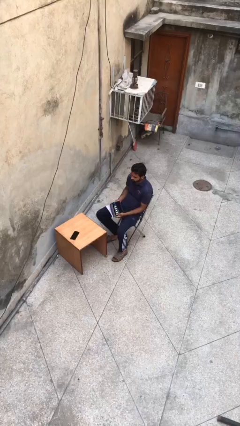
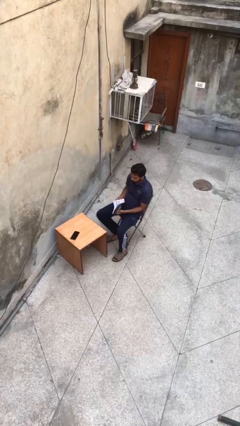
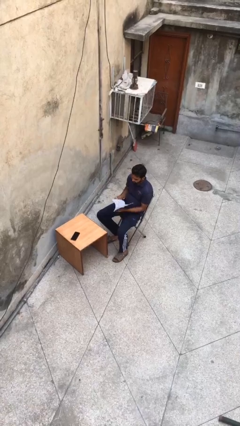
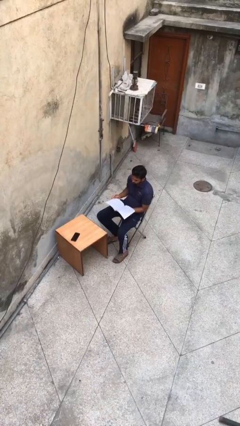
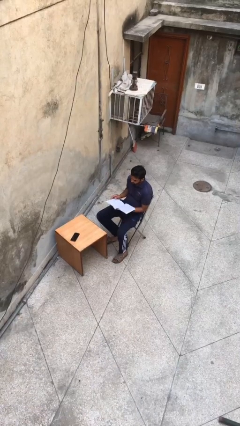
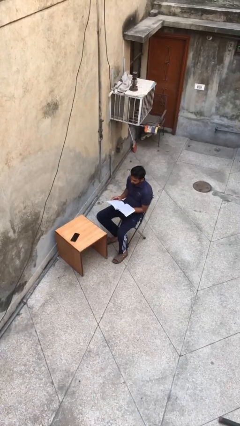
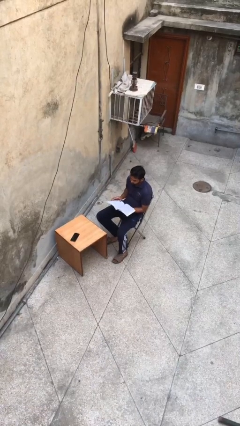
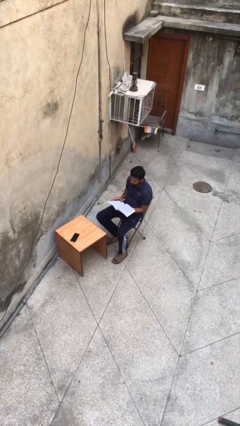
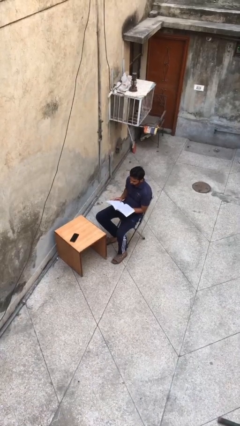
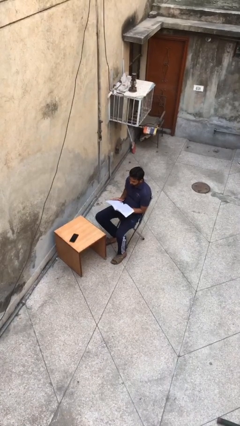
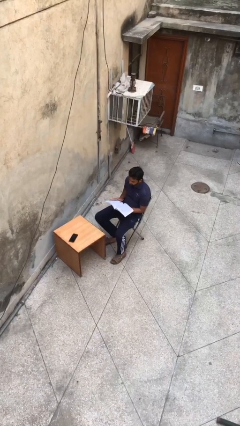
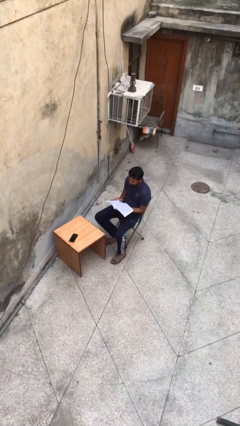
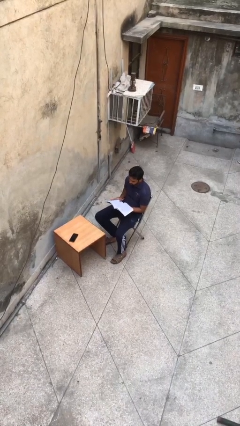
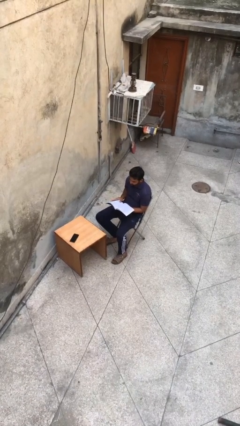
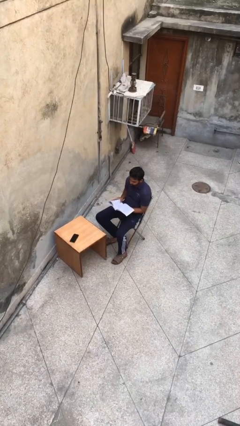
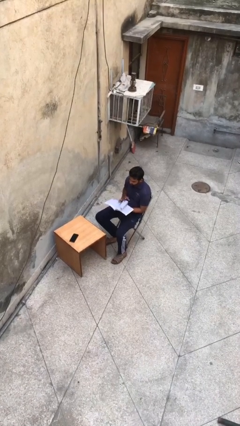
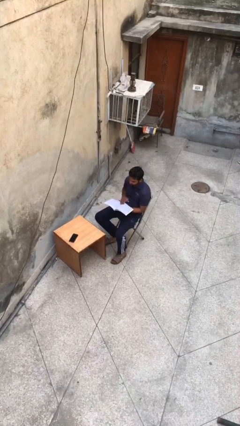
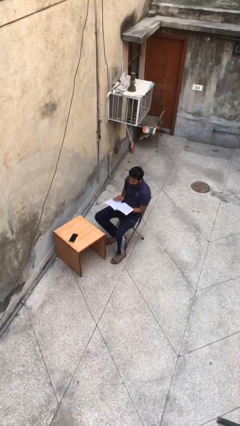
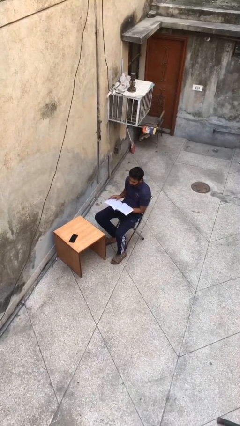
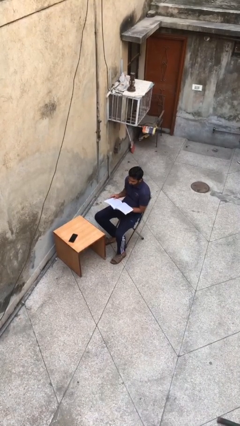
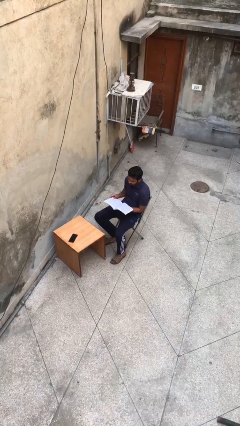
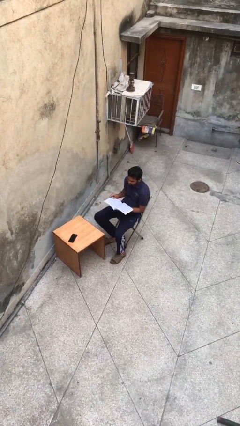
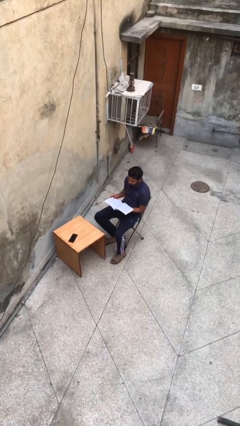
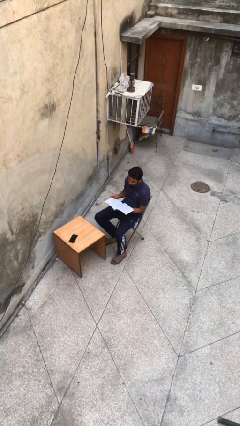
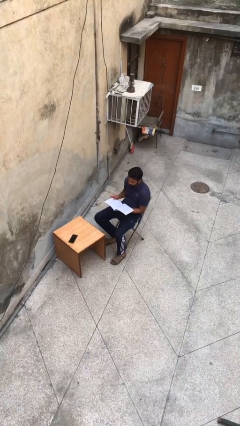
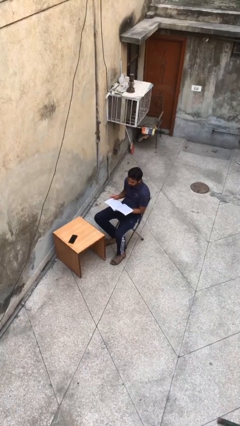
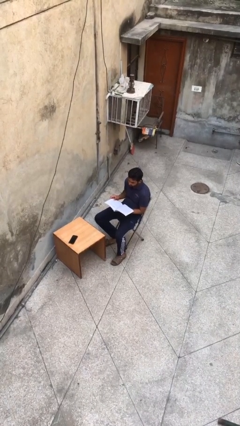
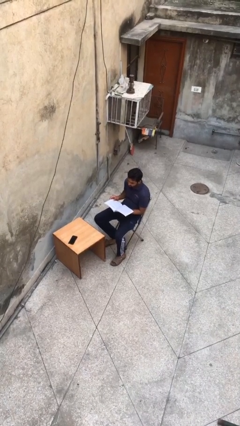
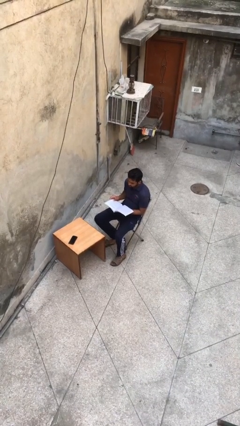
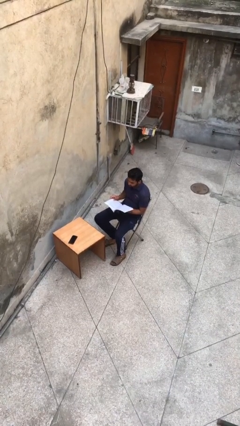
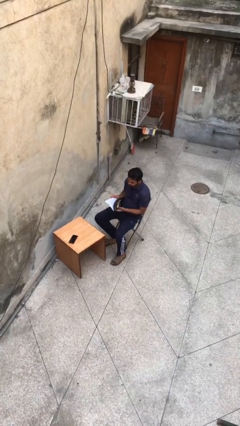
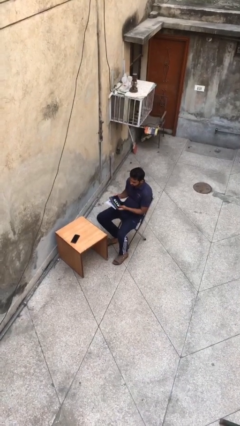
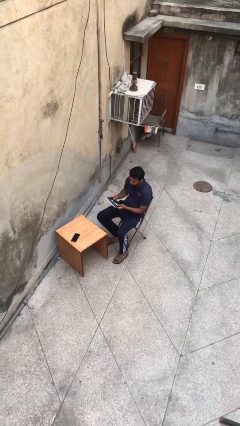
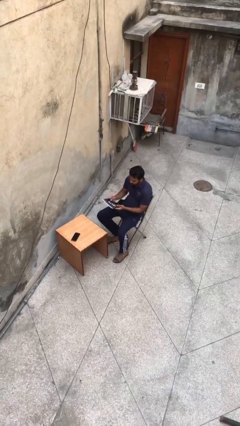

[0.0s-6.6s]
person reads document

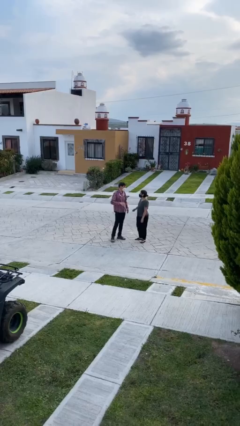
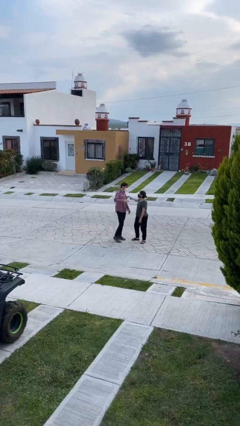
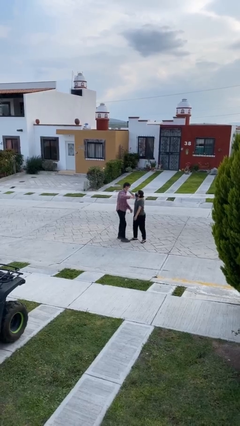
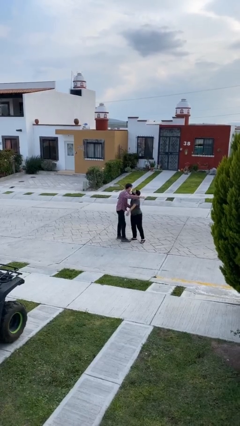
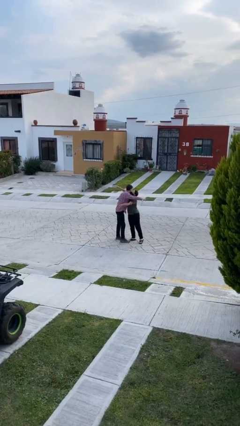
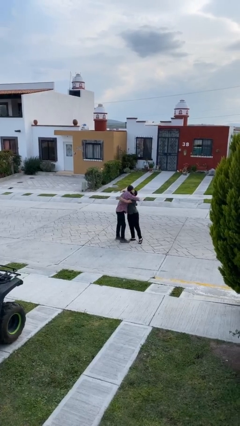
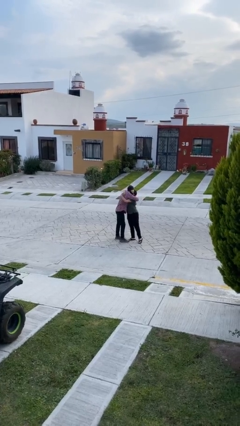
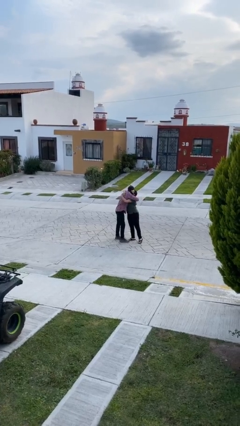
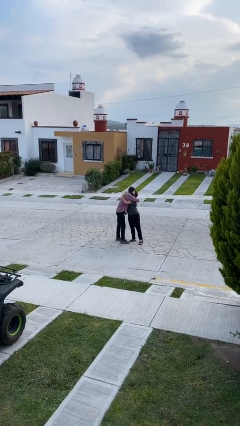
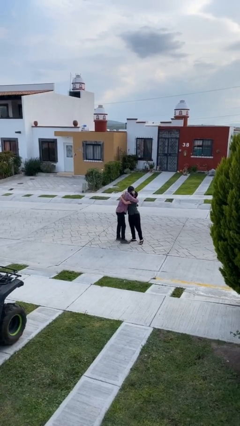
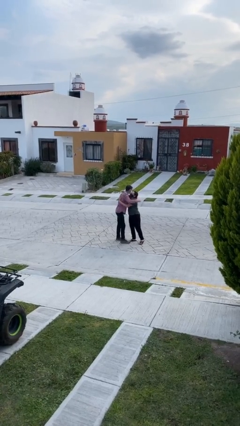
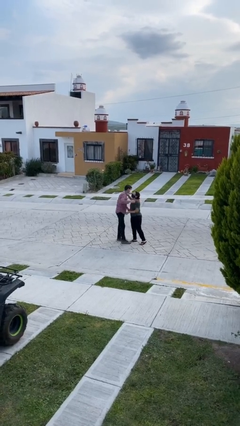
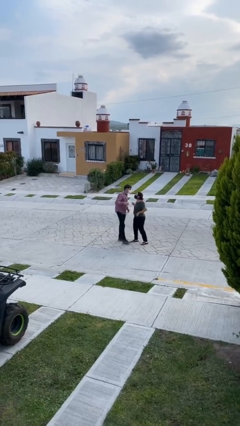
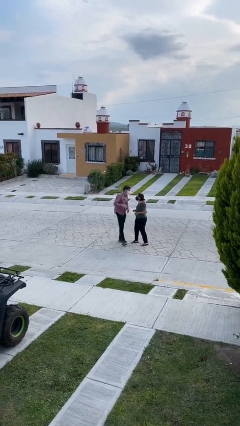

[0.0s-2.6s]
person embraces person

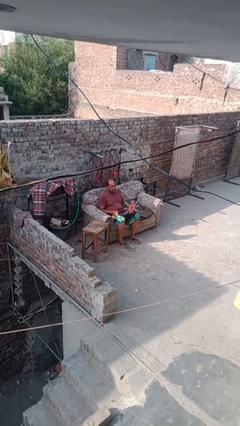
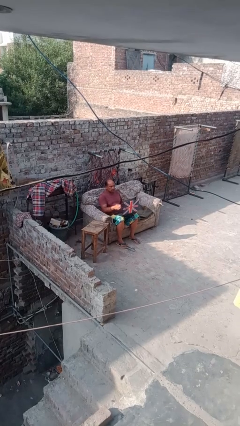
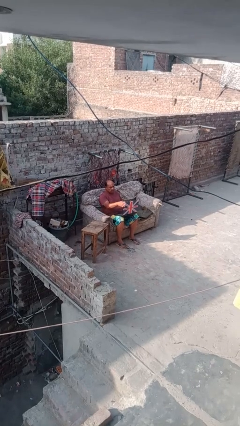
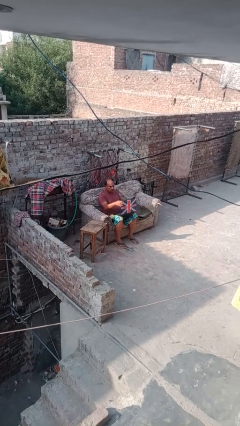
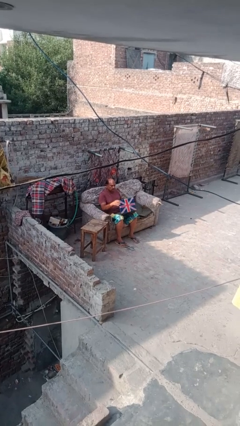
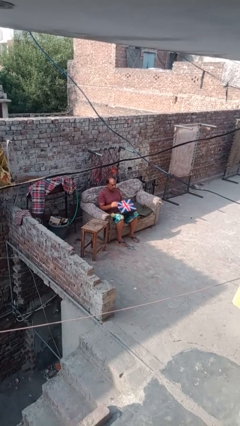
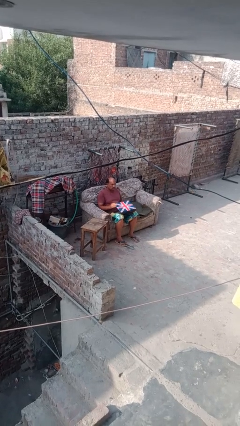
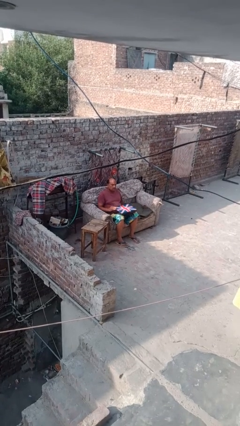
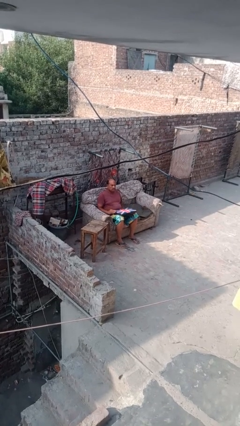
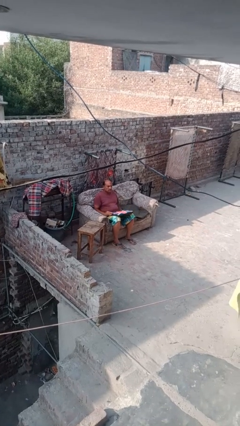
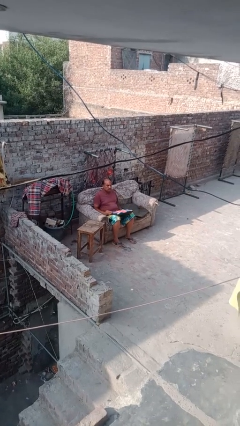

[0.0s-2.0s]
person closes laptop

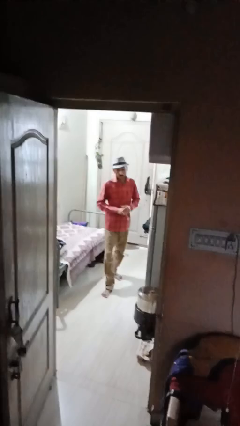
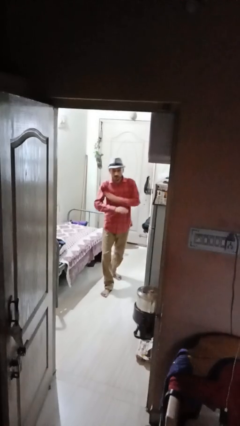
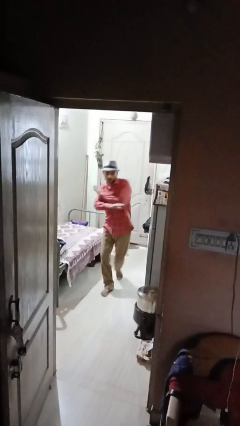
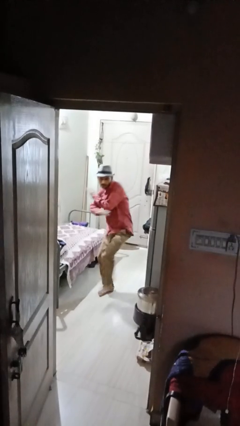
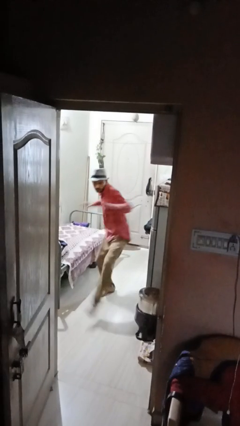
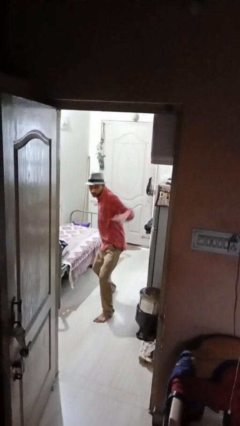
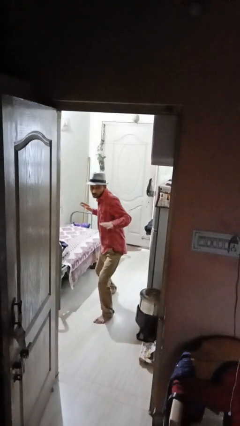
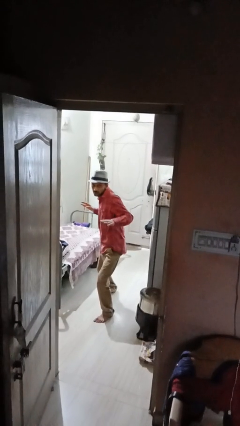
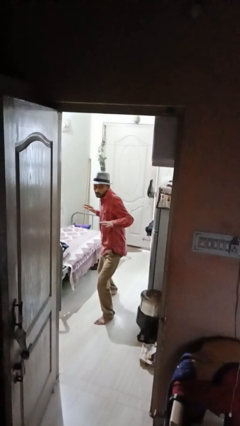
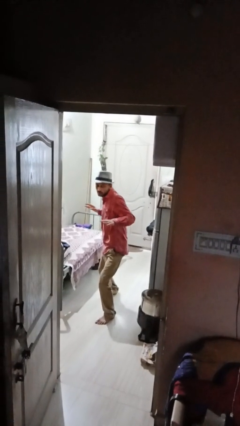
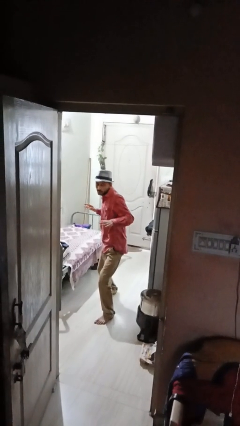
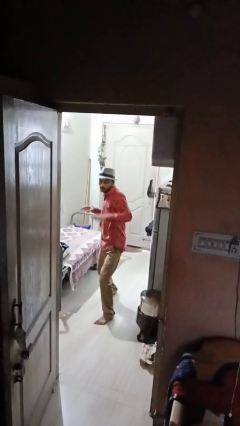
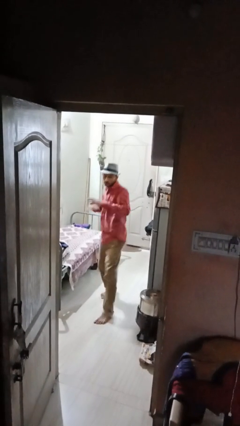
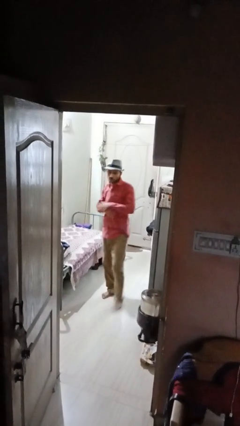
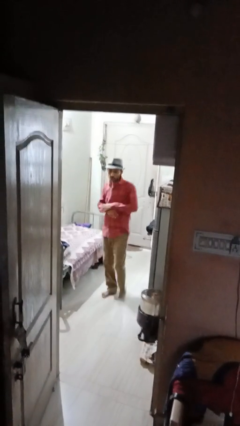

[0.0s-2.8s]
person karate chop

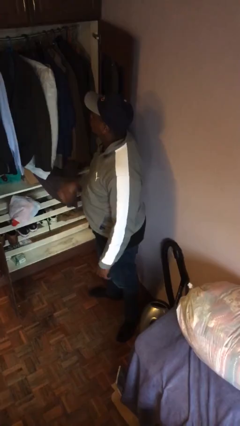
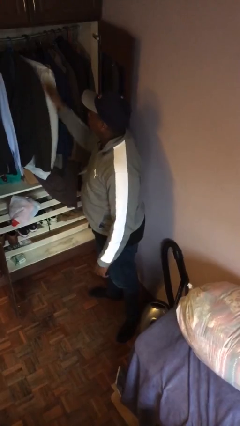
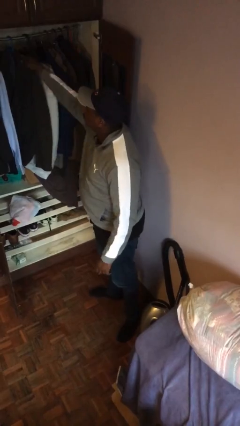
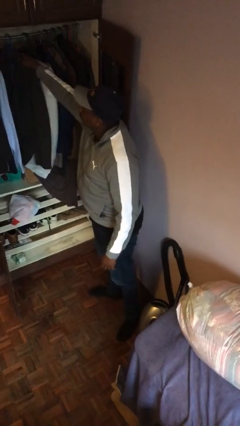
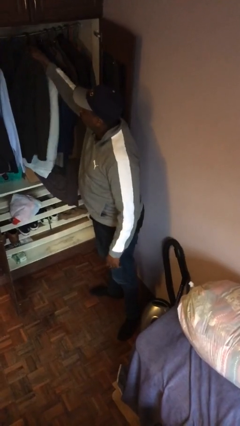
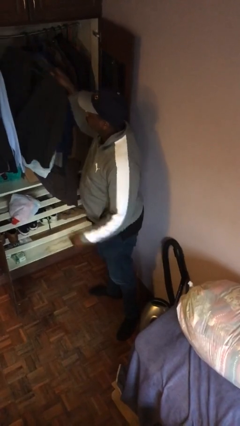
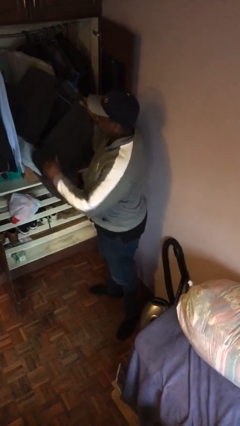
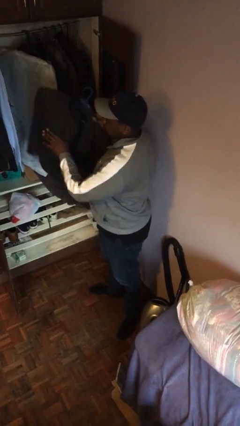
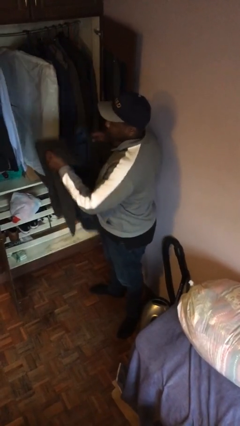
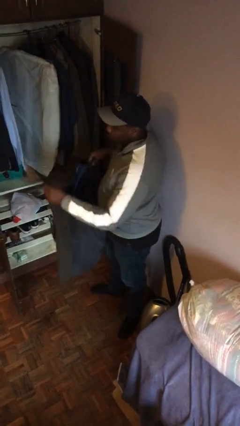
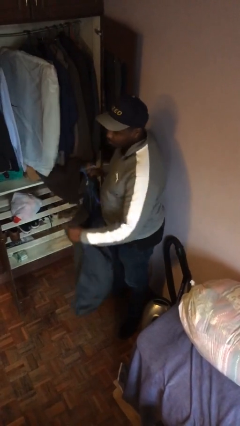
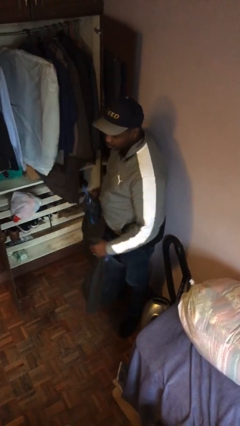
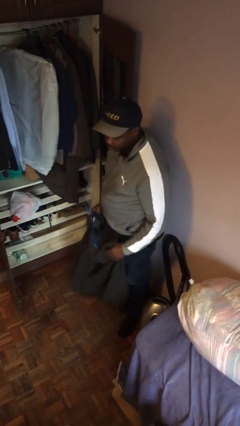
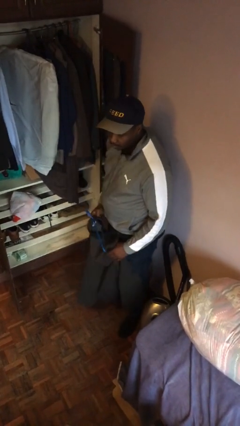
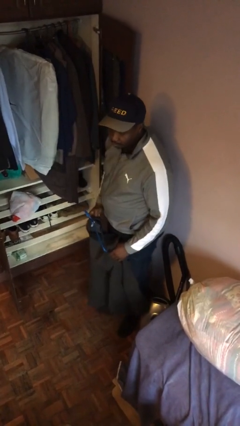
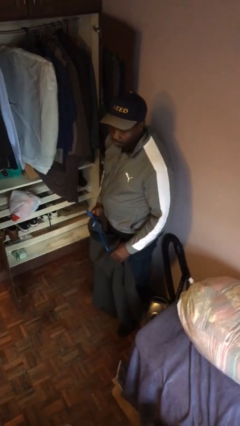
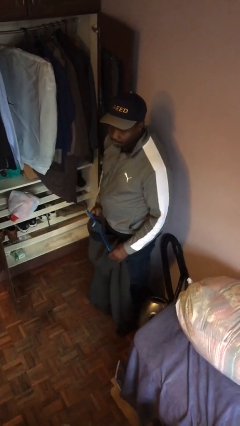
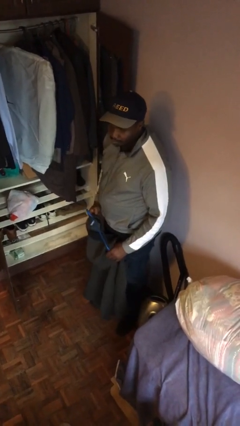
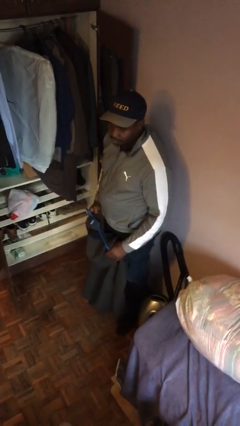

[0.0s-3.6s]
person takes clothes from closet
